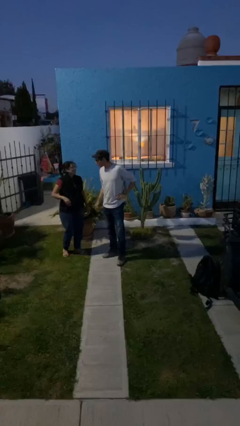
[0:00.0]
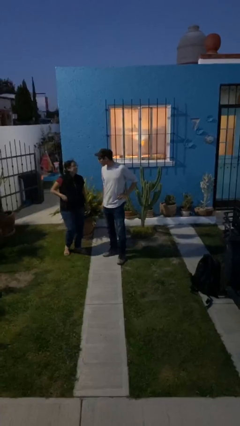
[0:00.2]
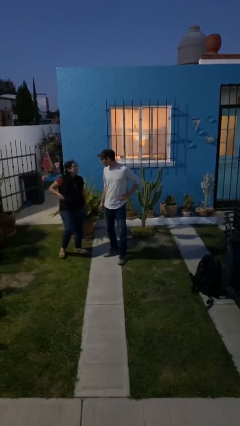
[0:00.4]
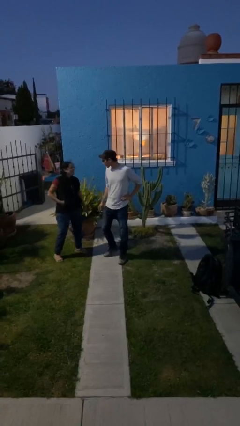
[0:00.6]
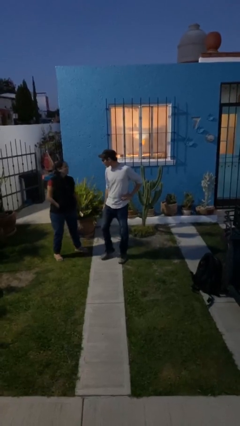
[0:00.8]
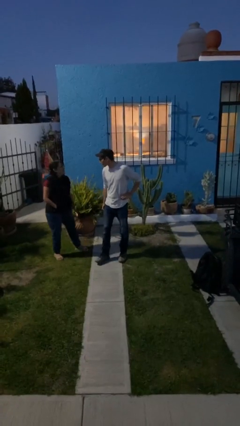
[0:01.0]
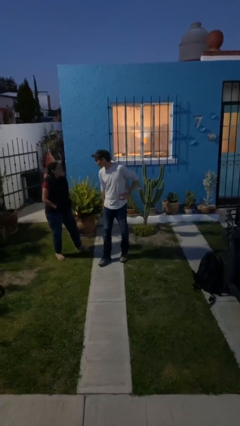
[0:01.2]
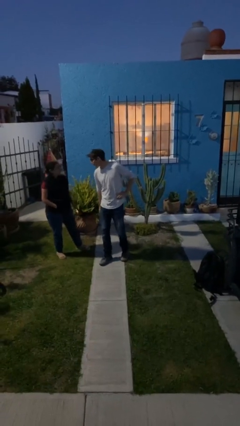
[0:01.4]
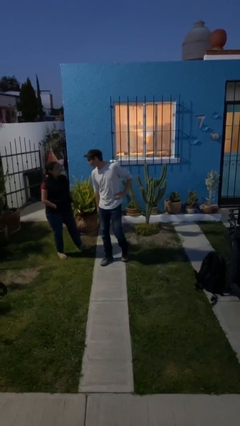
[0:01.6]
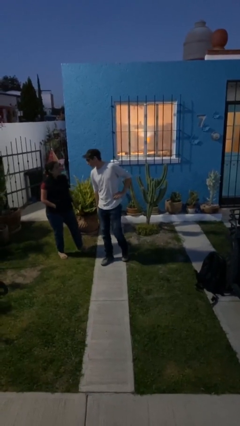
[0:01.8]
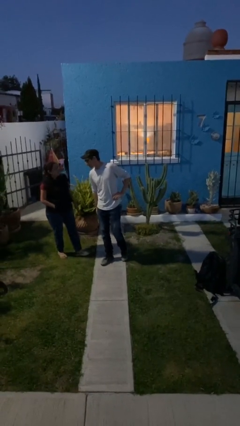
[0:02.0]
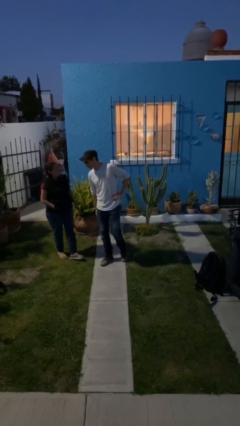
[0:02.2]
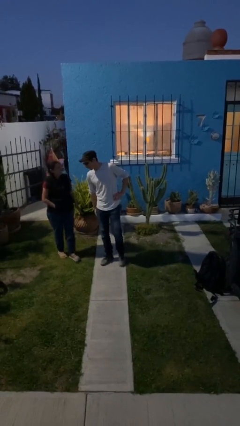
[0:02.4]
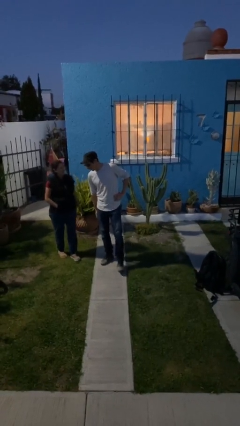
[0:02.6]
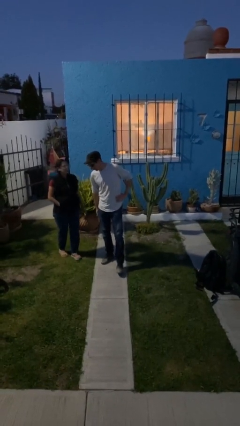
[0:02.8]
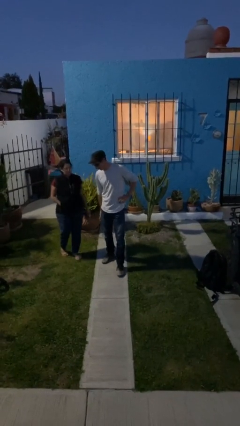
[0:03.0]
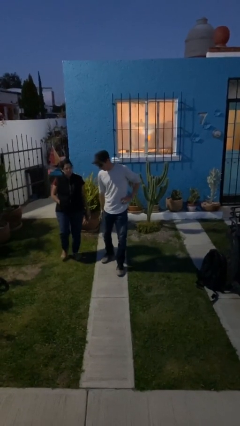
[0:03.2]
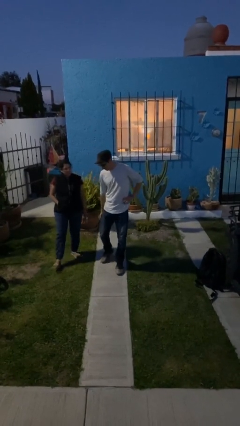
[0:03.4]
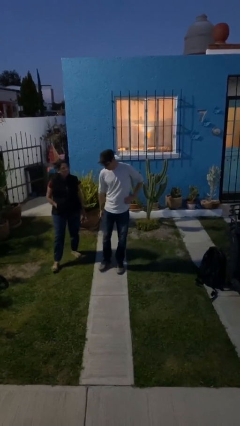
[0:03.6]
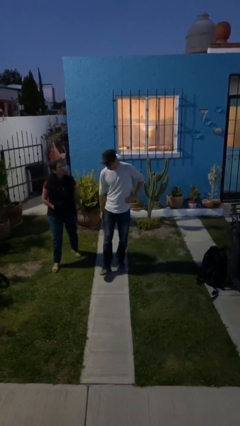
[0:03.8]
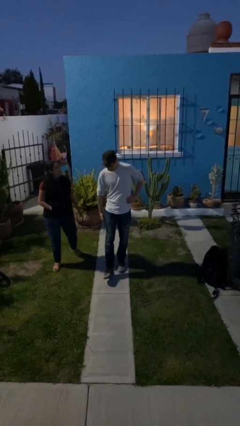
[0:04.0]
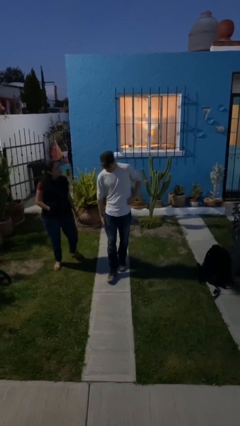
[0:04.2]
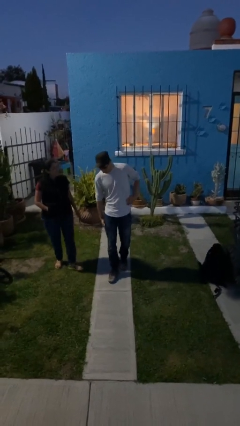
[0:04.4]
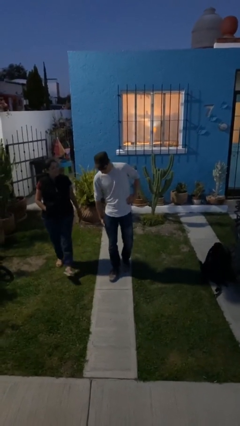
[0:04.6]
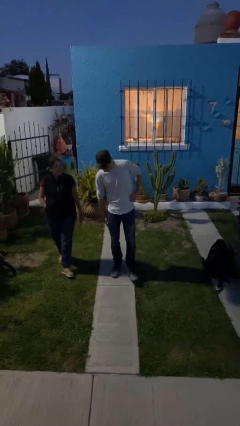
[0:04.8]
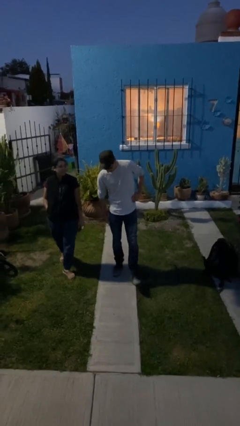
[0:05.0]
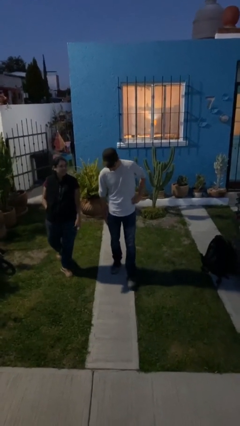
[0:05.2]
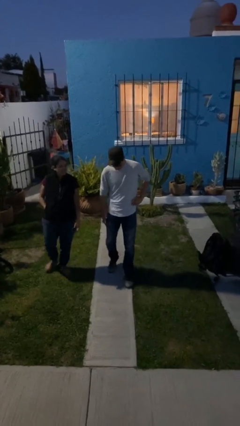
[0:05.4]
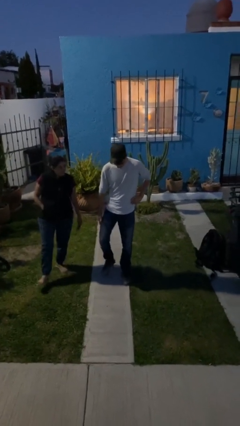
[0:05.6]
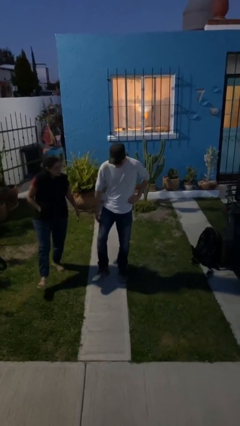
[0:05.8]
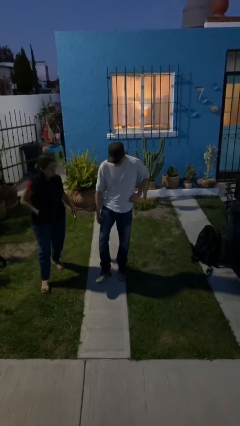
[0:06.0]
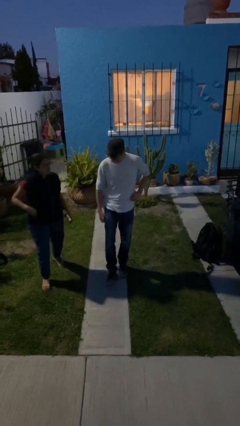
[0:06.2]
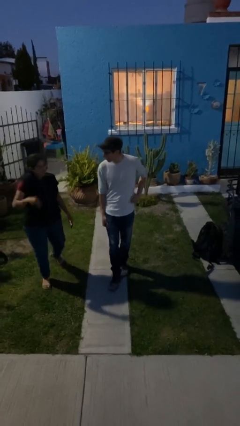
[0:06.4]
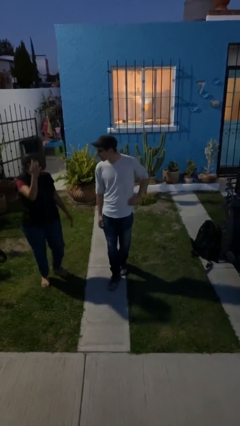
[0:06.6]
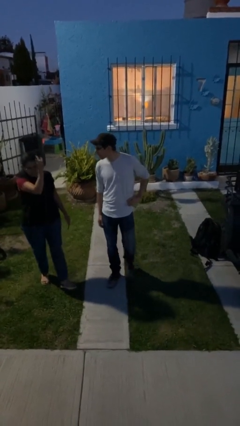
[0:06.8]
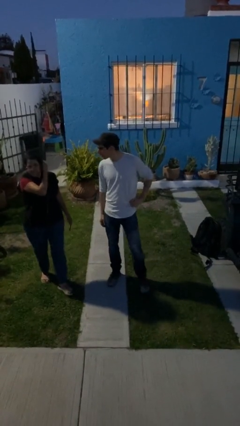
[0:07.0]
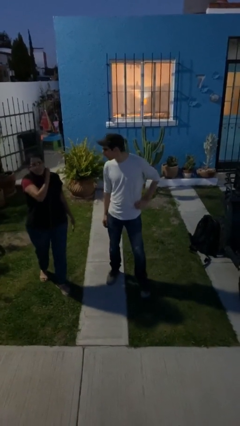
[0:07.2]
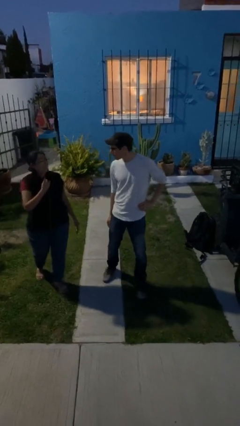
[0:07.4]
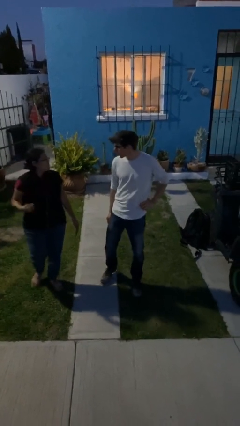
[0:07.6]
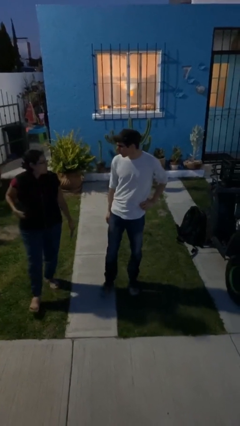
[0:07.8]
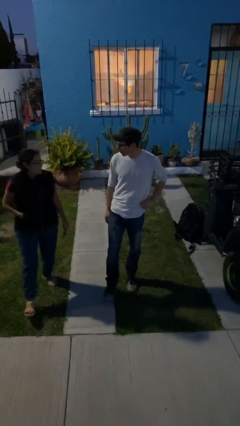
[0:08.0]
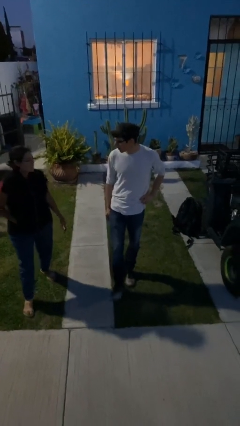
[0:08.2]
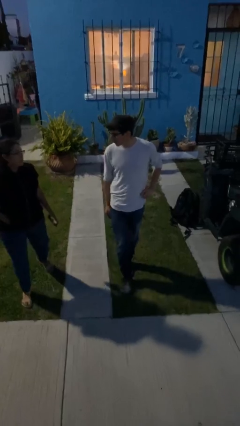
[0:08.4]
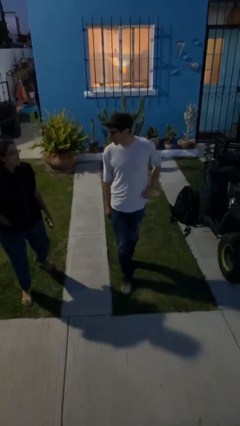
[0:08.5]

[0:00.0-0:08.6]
person talks to person

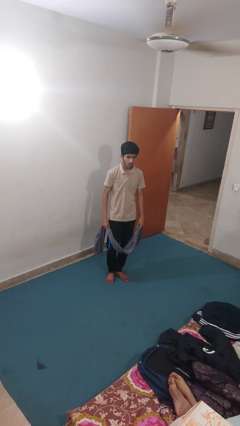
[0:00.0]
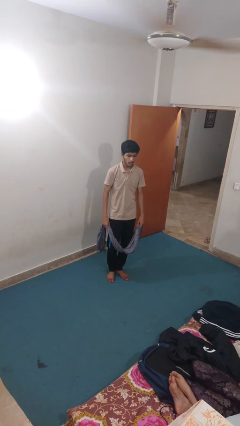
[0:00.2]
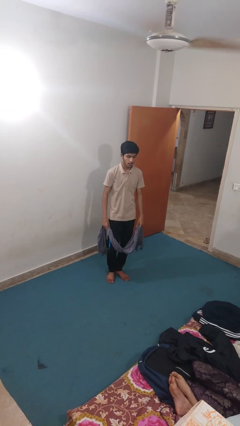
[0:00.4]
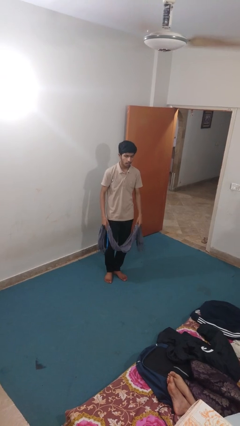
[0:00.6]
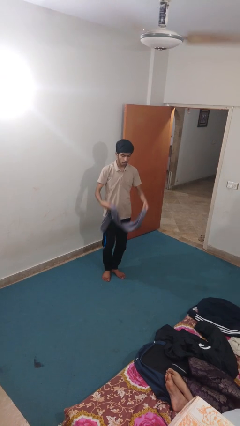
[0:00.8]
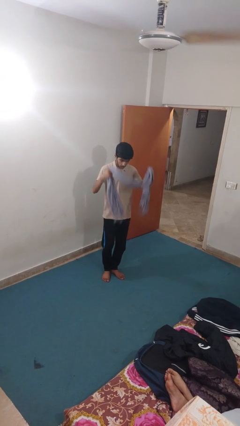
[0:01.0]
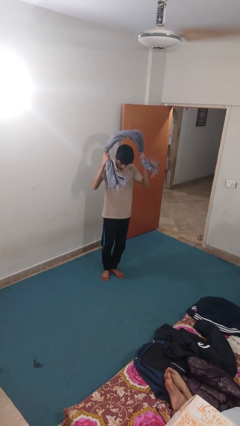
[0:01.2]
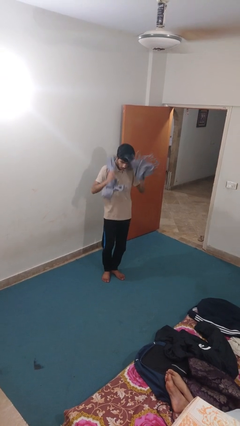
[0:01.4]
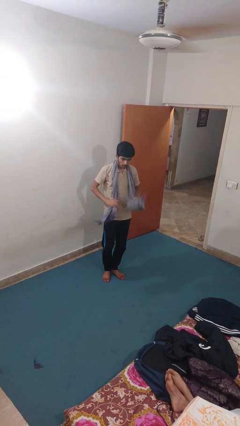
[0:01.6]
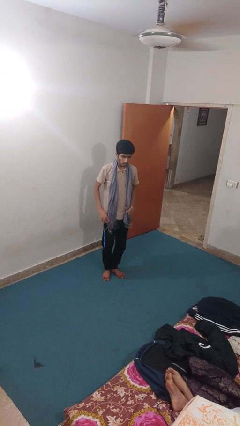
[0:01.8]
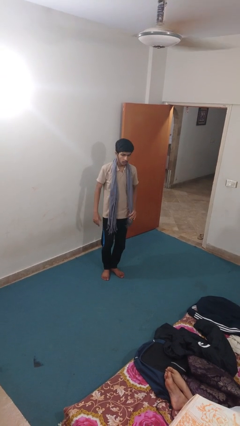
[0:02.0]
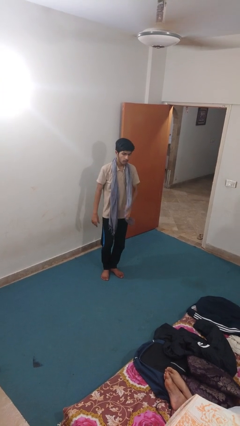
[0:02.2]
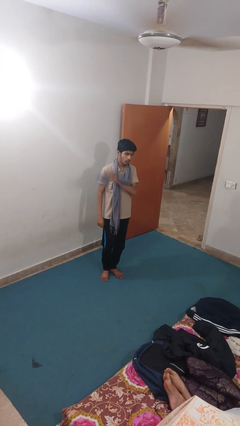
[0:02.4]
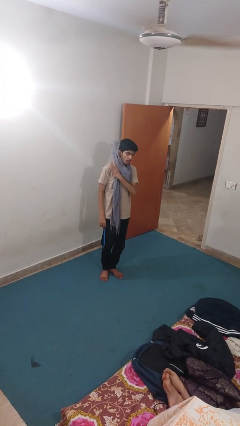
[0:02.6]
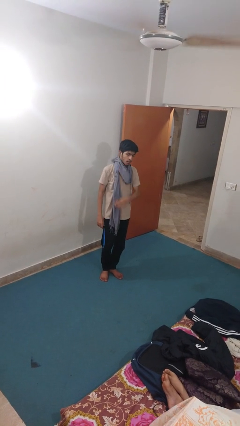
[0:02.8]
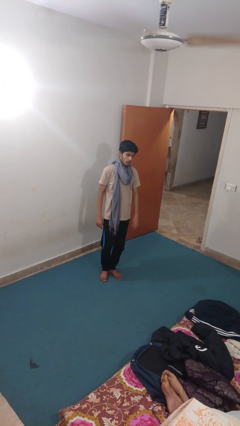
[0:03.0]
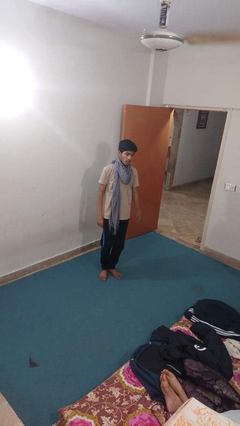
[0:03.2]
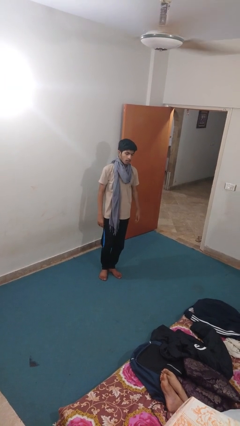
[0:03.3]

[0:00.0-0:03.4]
person puts on scarf

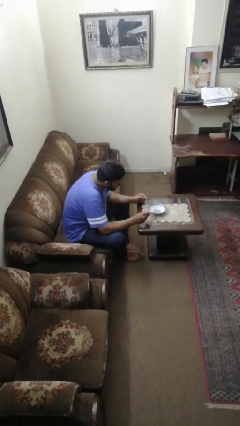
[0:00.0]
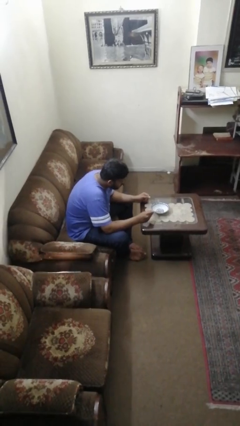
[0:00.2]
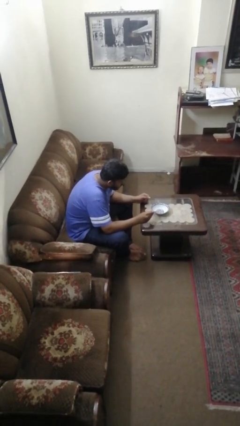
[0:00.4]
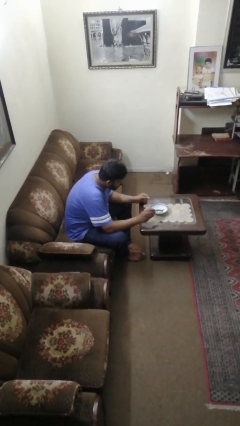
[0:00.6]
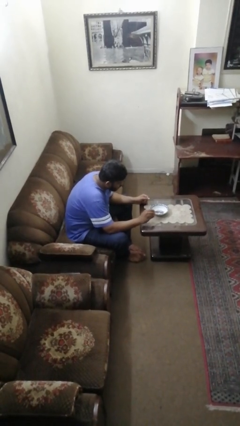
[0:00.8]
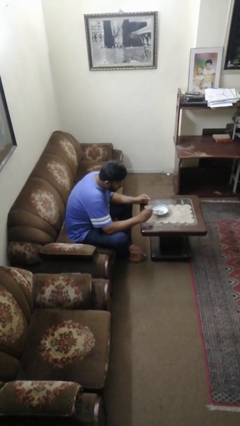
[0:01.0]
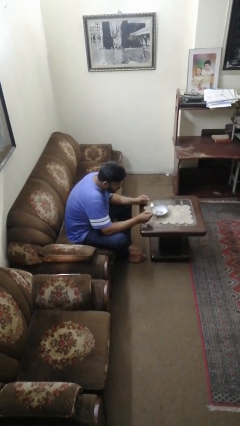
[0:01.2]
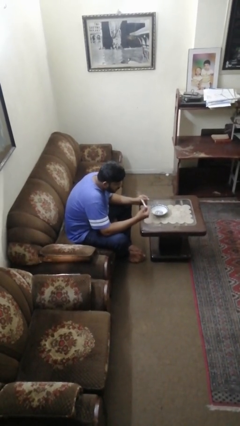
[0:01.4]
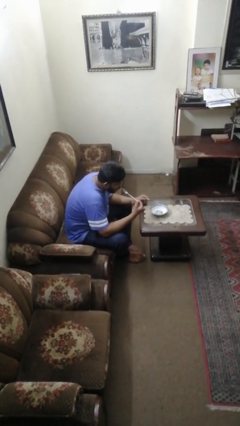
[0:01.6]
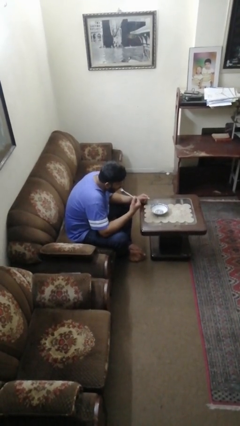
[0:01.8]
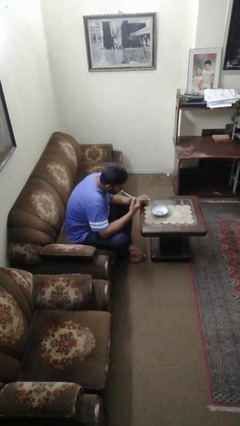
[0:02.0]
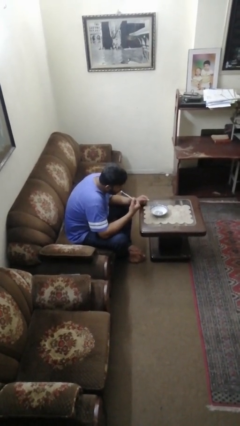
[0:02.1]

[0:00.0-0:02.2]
person eats with utensil

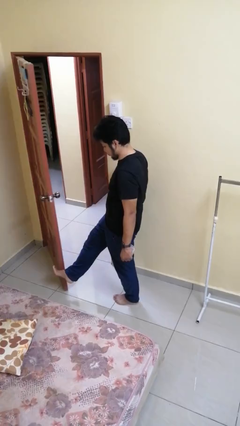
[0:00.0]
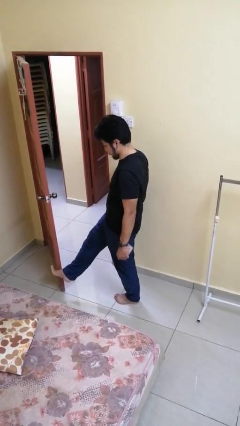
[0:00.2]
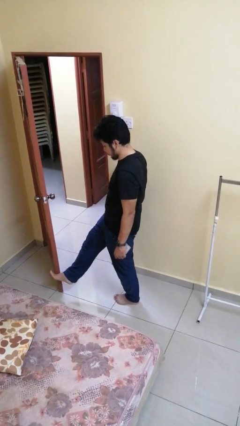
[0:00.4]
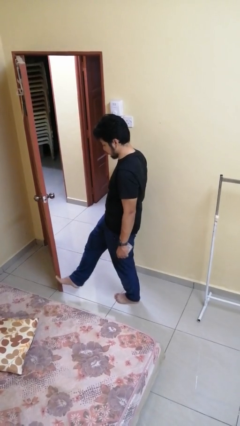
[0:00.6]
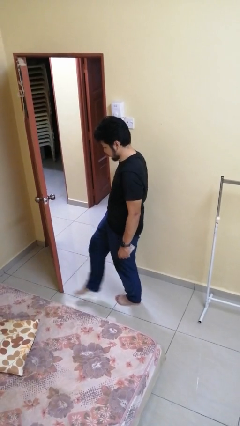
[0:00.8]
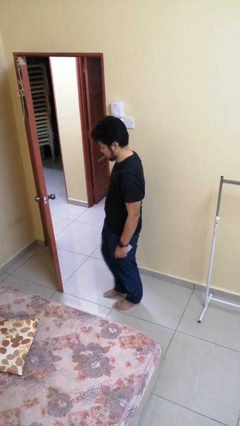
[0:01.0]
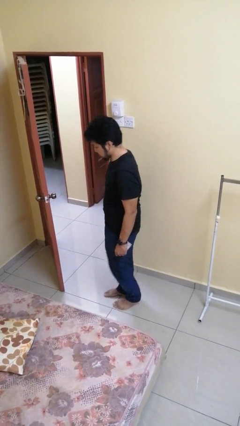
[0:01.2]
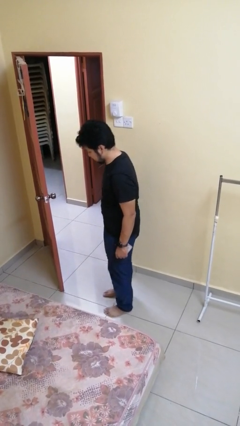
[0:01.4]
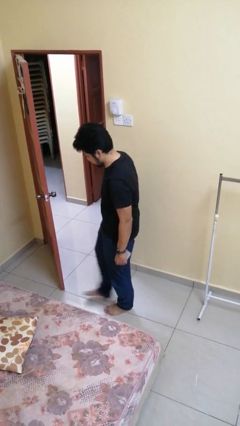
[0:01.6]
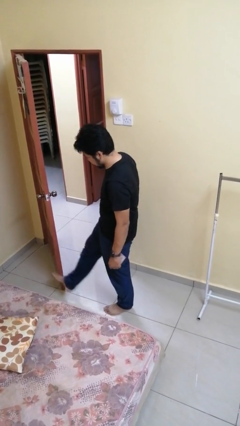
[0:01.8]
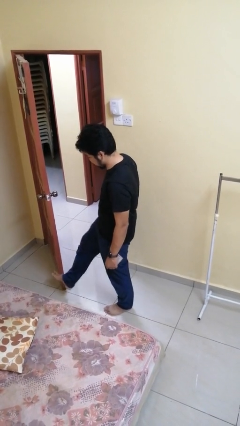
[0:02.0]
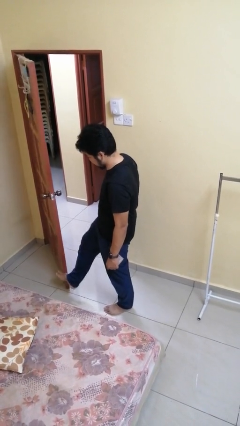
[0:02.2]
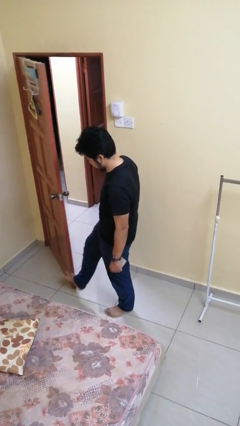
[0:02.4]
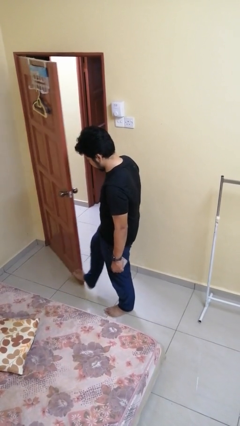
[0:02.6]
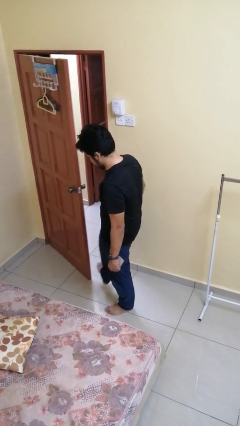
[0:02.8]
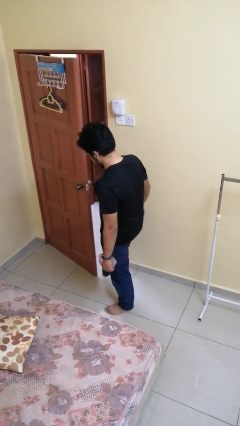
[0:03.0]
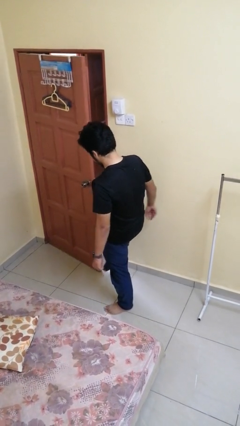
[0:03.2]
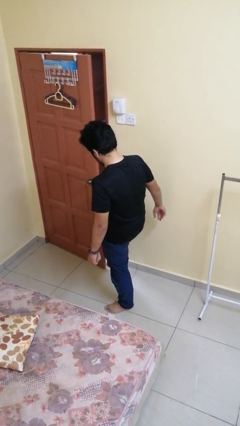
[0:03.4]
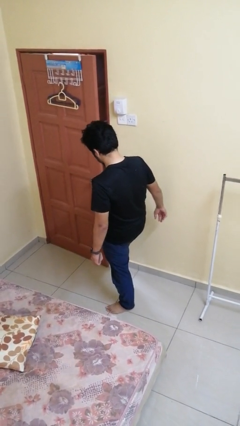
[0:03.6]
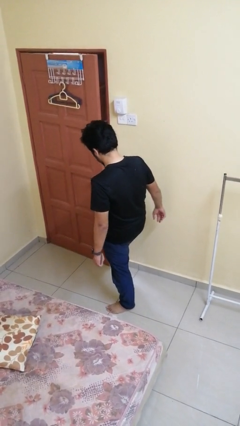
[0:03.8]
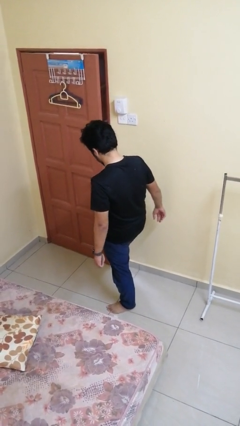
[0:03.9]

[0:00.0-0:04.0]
person closes door with foot
